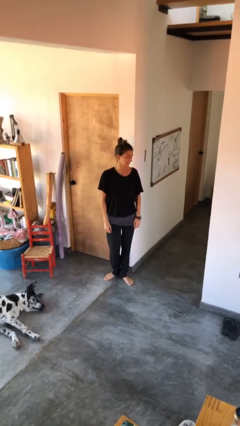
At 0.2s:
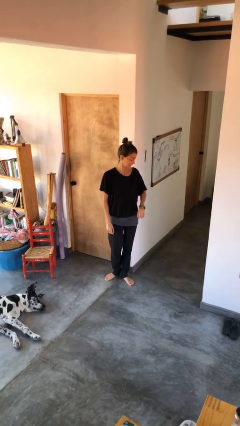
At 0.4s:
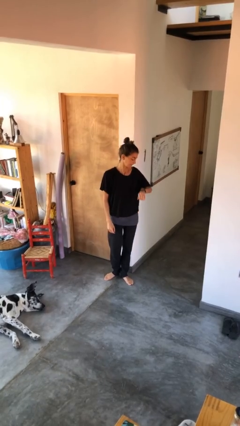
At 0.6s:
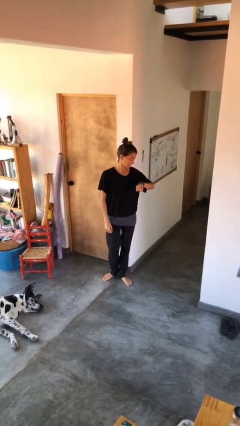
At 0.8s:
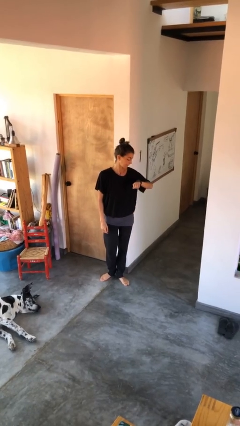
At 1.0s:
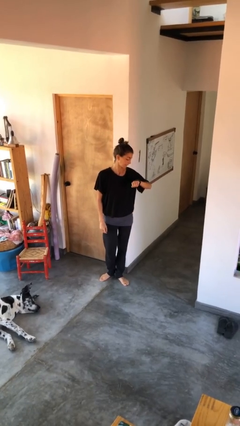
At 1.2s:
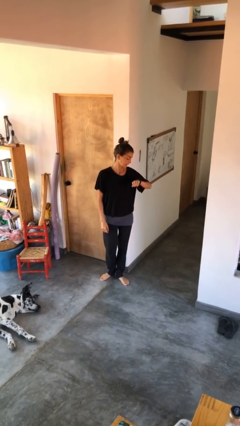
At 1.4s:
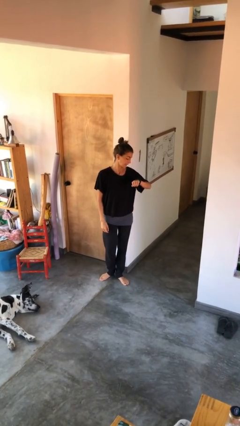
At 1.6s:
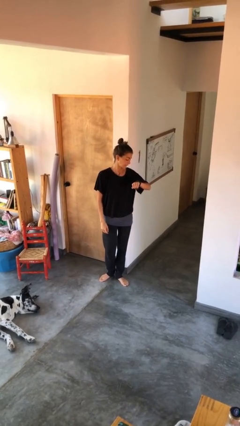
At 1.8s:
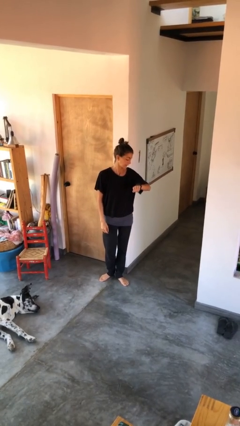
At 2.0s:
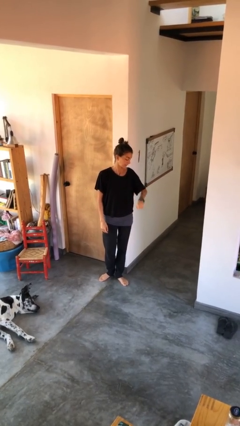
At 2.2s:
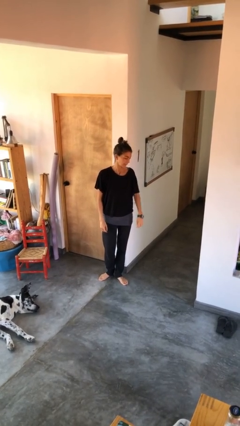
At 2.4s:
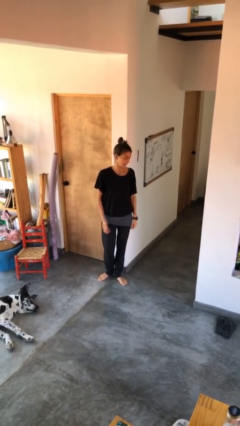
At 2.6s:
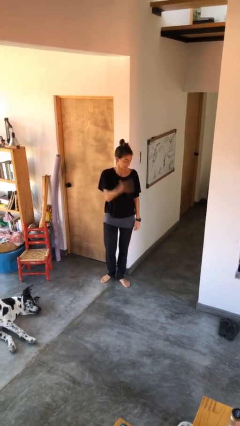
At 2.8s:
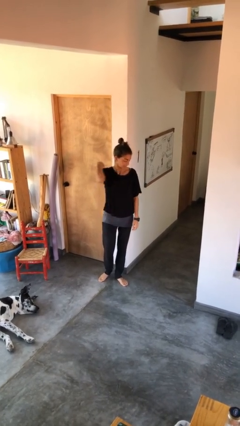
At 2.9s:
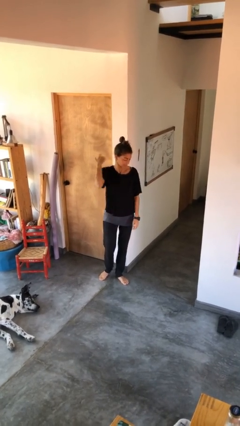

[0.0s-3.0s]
person looks at wristwatch

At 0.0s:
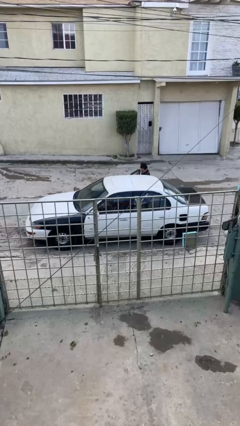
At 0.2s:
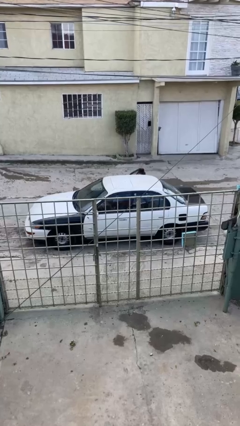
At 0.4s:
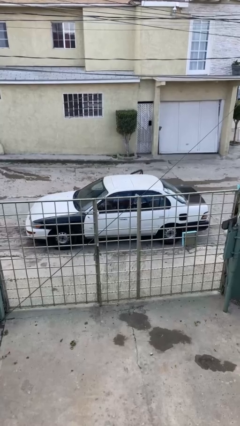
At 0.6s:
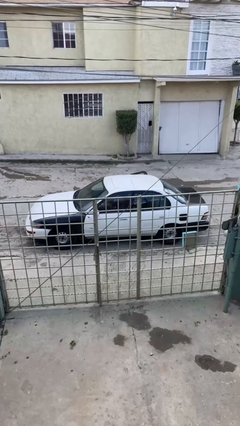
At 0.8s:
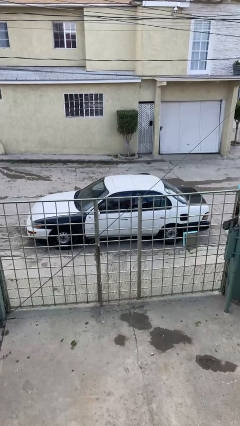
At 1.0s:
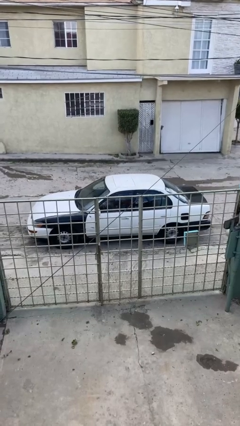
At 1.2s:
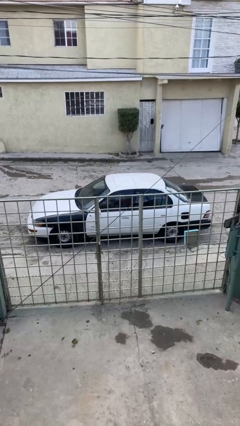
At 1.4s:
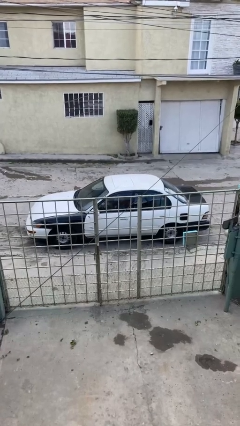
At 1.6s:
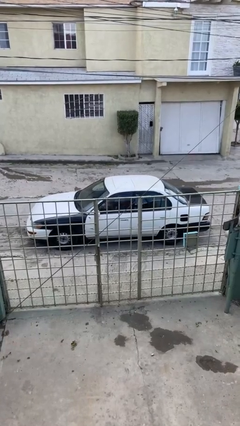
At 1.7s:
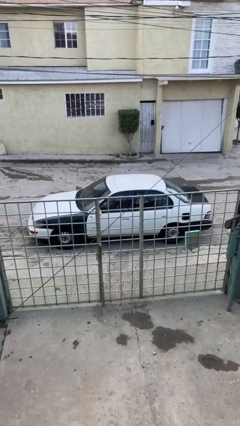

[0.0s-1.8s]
car picks up person

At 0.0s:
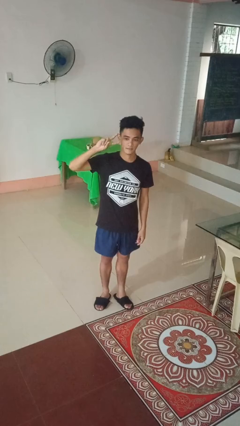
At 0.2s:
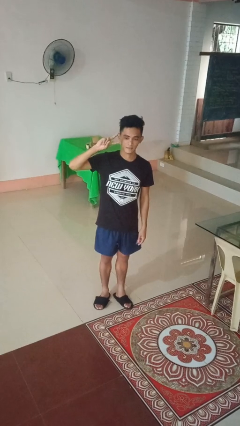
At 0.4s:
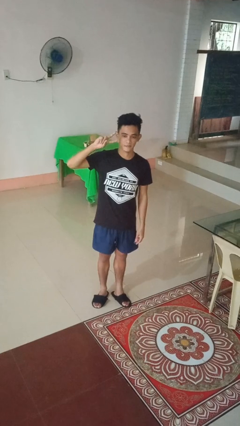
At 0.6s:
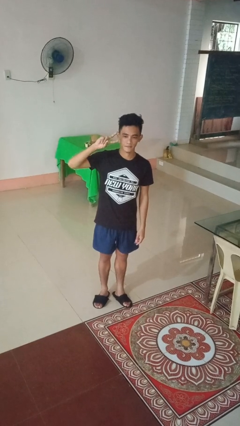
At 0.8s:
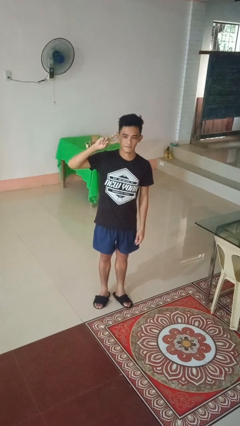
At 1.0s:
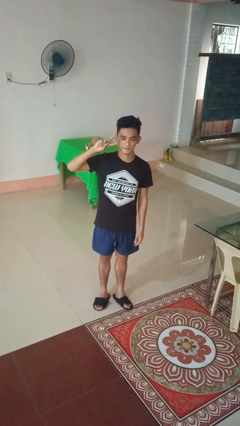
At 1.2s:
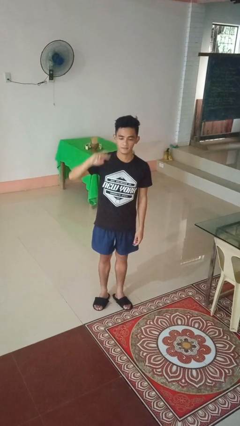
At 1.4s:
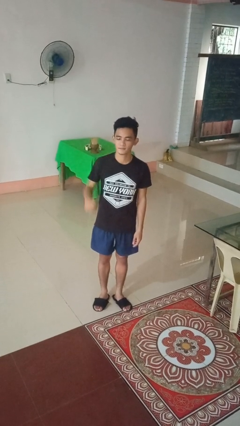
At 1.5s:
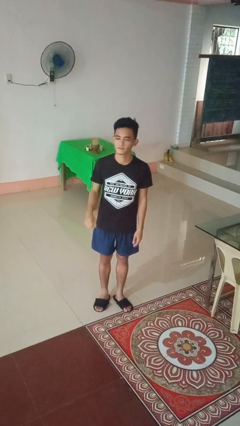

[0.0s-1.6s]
person gestures peace

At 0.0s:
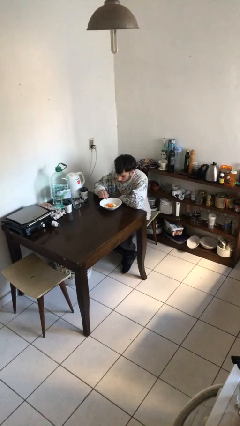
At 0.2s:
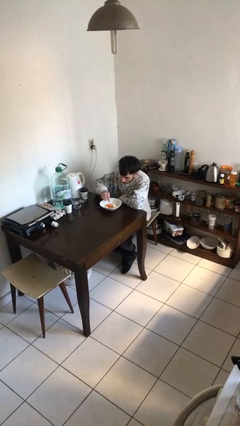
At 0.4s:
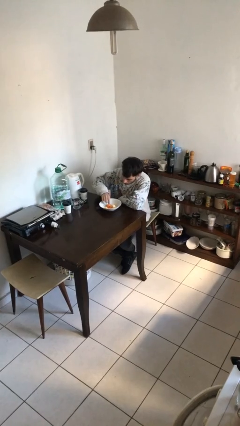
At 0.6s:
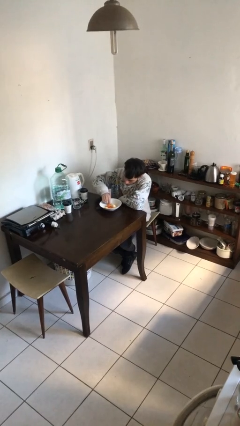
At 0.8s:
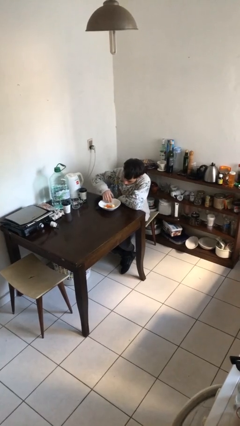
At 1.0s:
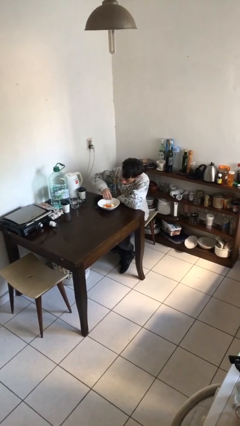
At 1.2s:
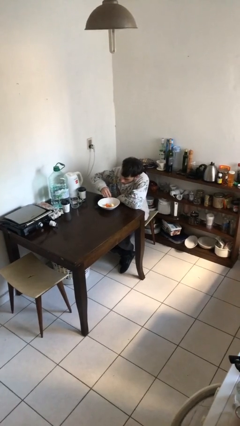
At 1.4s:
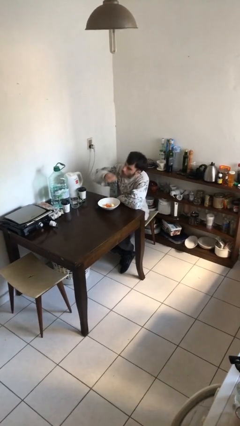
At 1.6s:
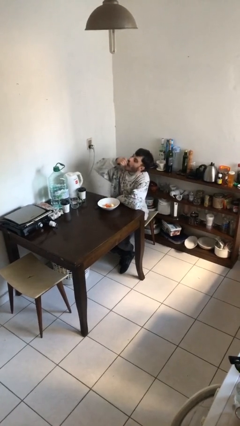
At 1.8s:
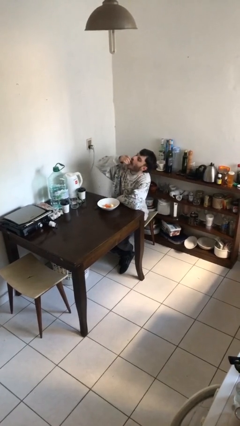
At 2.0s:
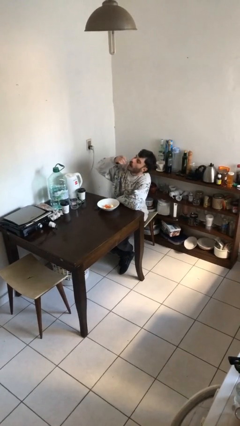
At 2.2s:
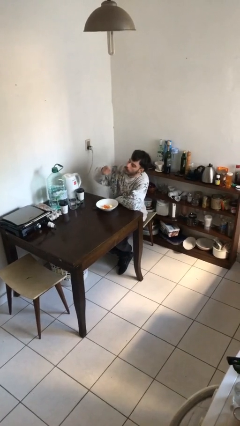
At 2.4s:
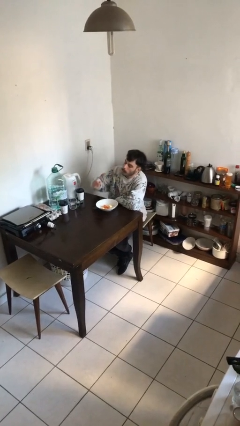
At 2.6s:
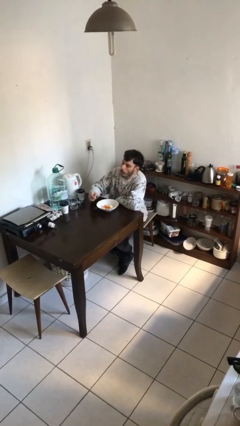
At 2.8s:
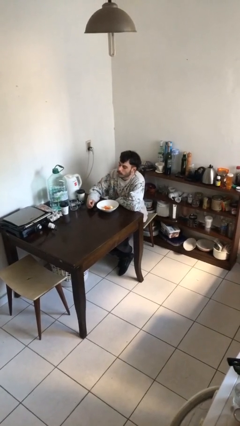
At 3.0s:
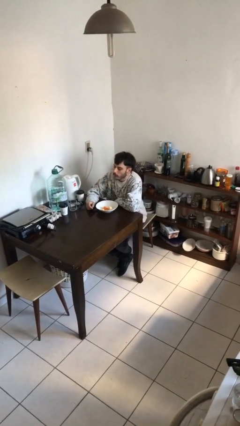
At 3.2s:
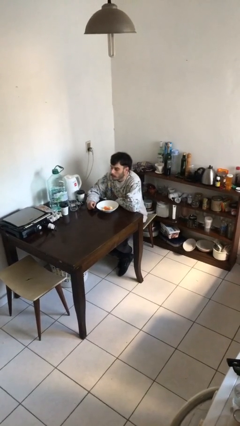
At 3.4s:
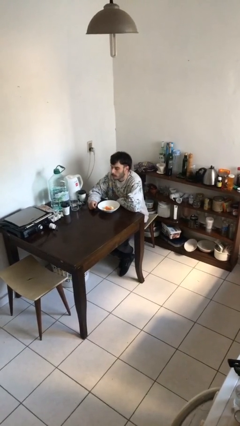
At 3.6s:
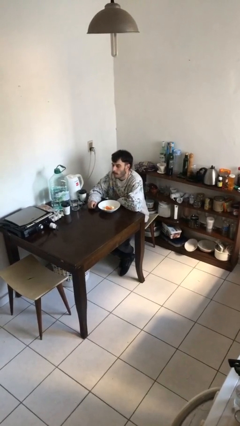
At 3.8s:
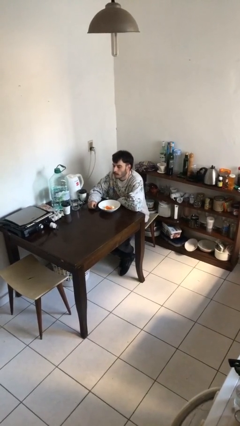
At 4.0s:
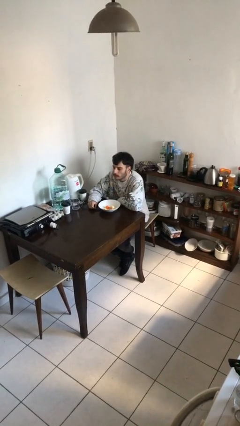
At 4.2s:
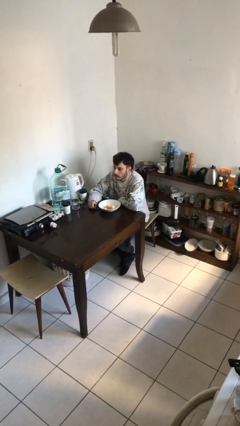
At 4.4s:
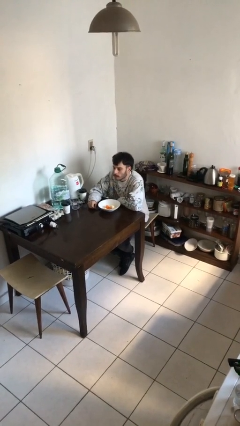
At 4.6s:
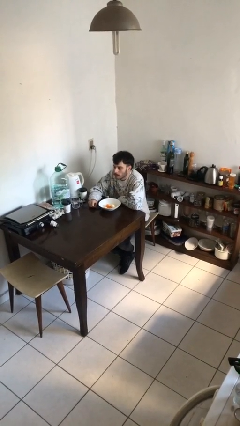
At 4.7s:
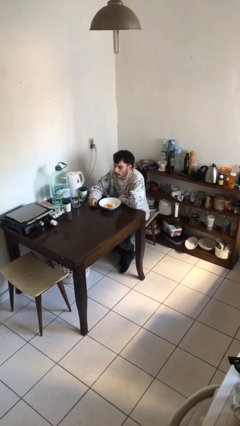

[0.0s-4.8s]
person eats with hands

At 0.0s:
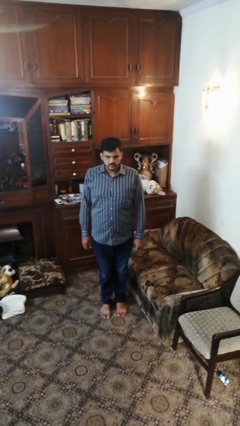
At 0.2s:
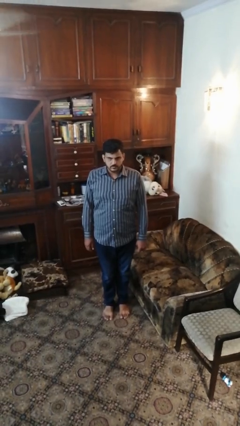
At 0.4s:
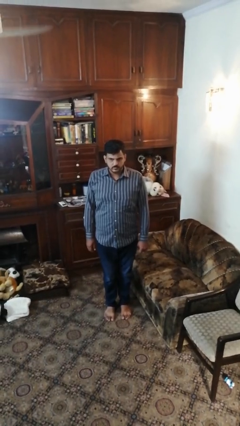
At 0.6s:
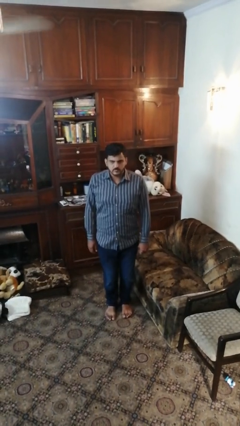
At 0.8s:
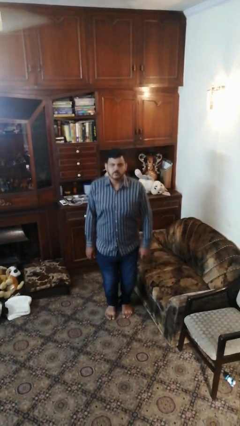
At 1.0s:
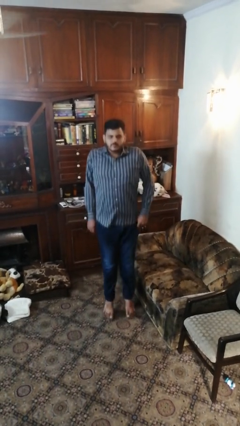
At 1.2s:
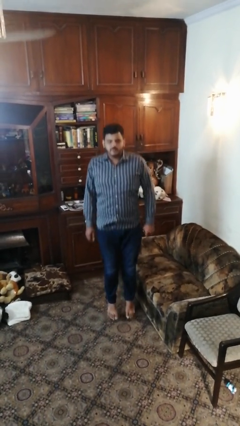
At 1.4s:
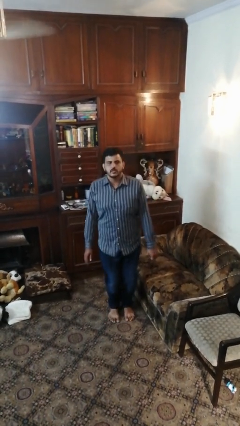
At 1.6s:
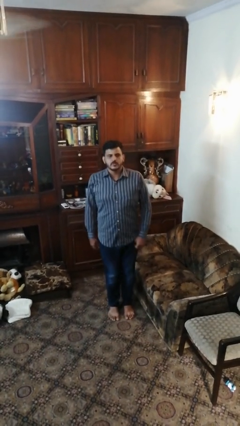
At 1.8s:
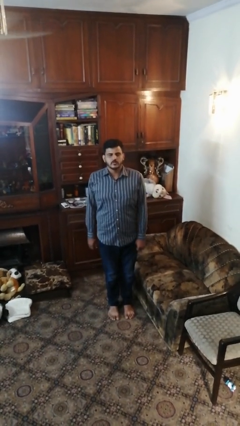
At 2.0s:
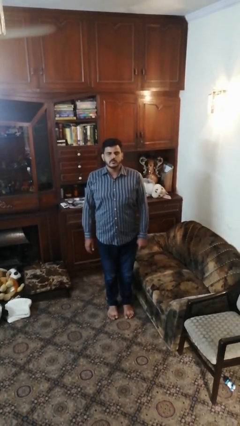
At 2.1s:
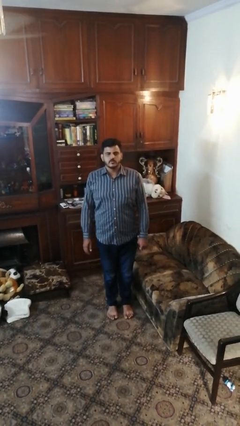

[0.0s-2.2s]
person jumps

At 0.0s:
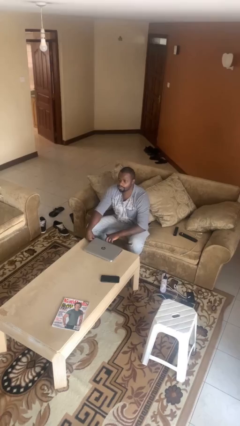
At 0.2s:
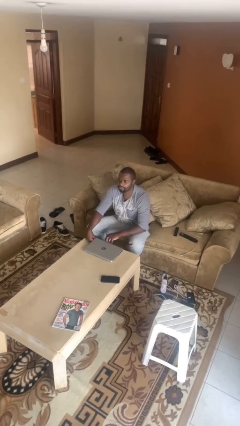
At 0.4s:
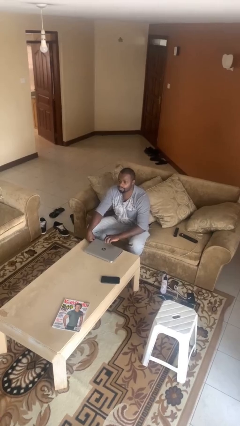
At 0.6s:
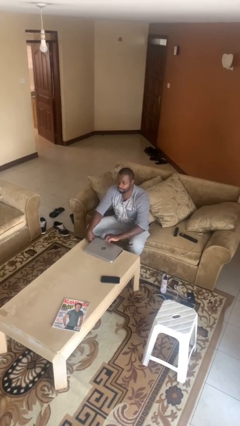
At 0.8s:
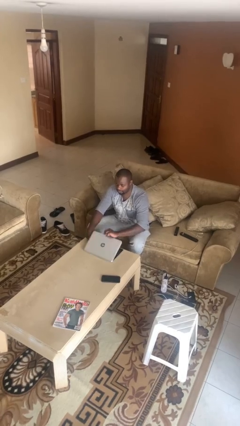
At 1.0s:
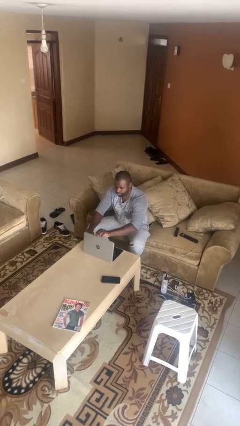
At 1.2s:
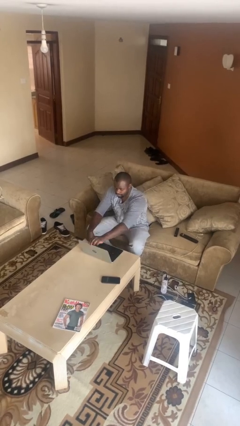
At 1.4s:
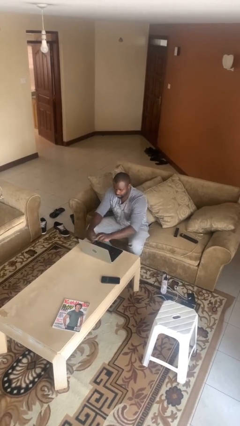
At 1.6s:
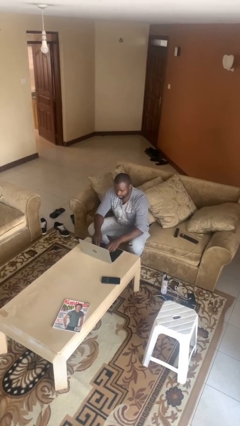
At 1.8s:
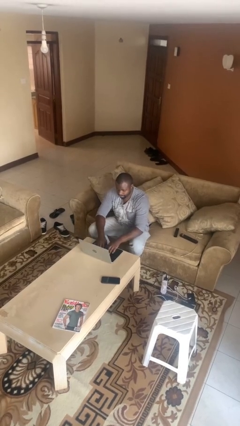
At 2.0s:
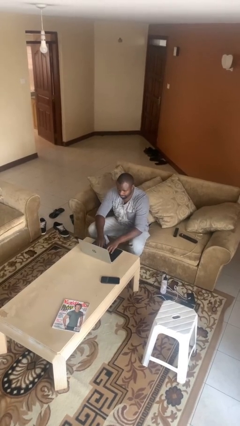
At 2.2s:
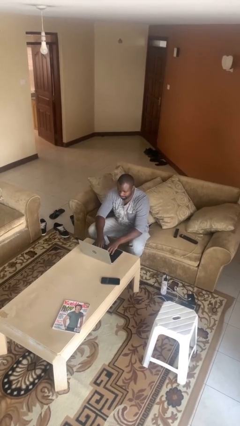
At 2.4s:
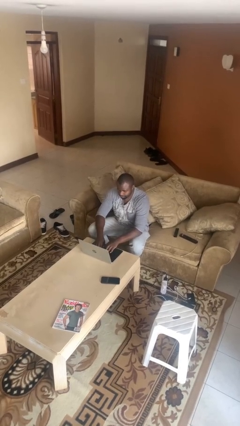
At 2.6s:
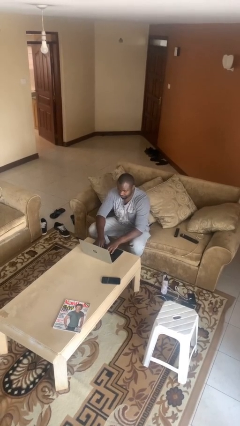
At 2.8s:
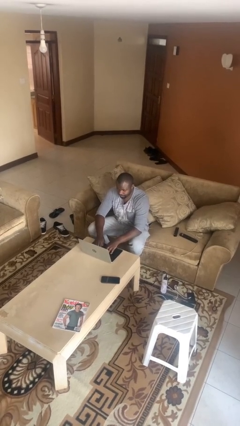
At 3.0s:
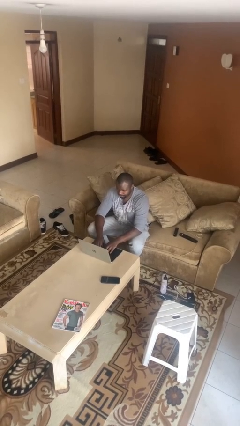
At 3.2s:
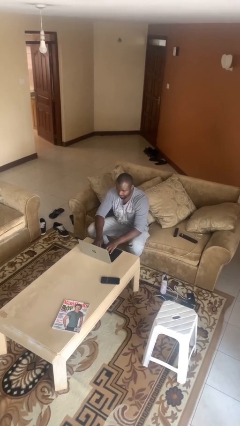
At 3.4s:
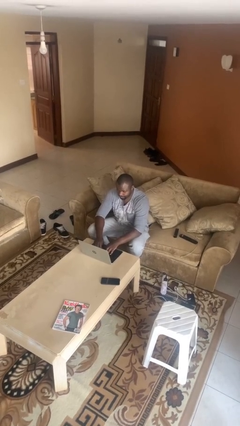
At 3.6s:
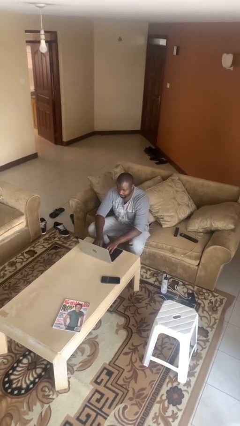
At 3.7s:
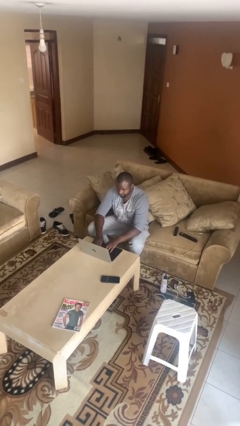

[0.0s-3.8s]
person interacts with laptop
